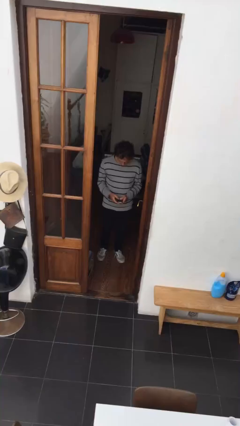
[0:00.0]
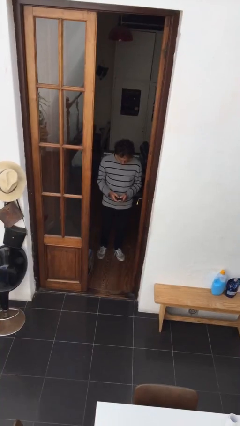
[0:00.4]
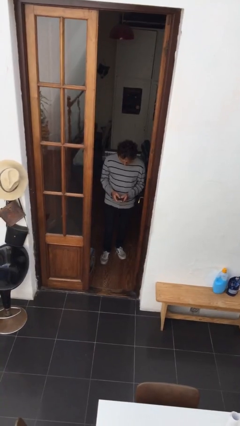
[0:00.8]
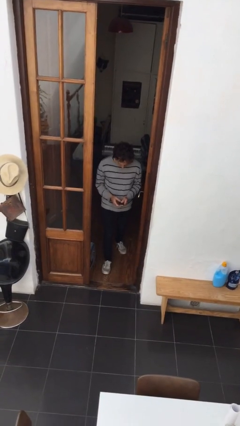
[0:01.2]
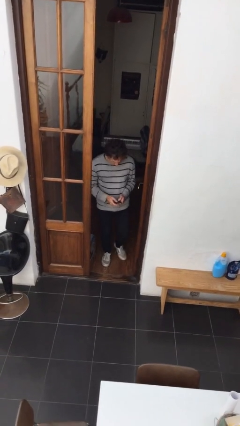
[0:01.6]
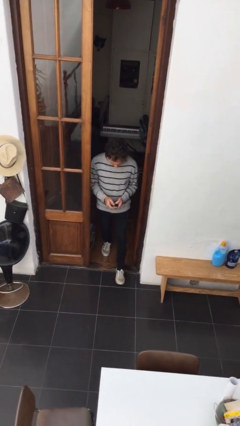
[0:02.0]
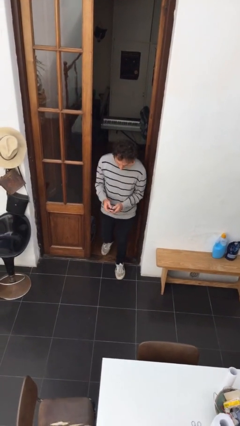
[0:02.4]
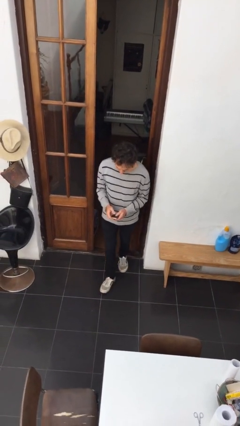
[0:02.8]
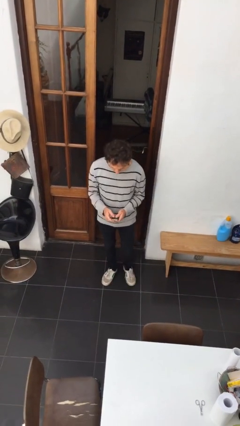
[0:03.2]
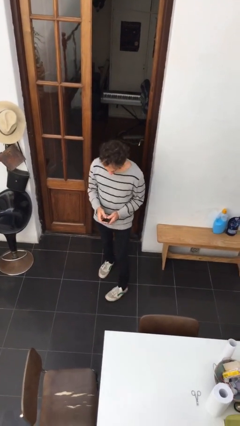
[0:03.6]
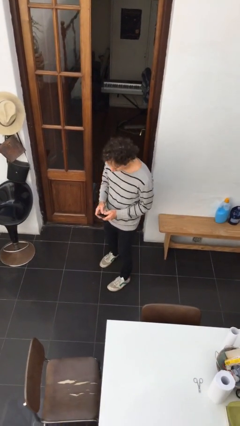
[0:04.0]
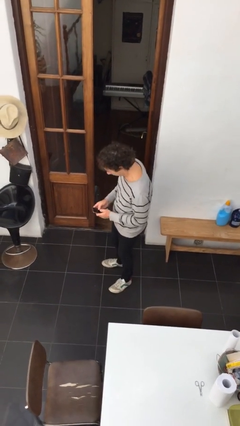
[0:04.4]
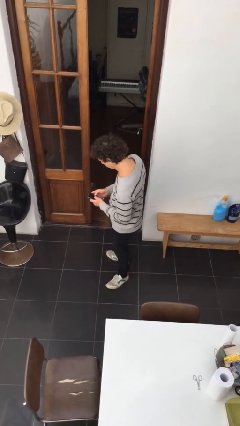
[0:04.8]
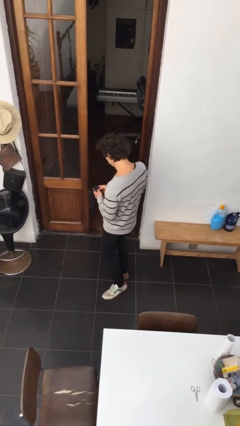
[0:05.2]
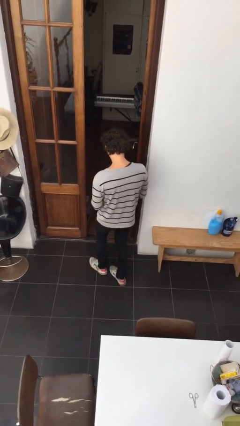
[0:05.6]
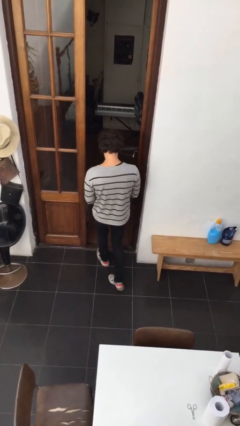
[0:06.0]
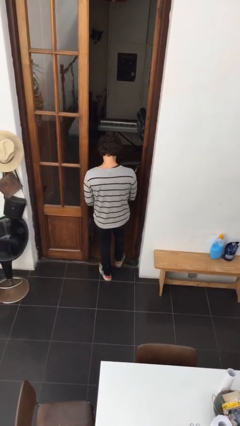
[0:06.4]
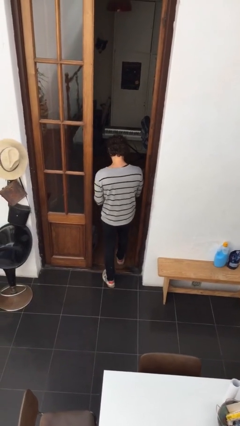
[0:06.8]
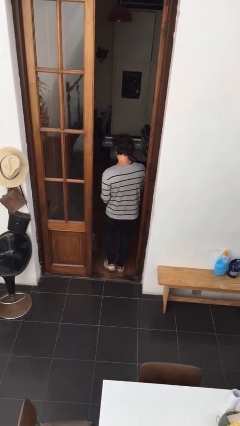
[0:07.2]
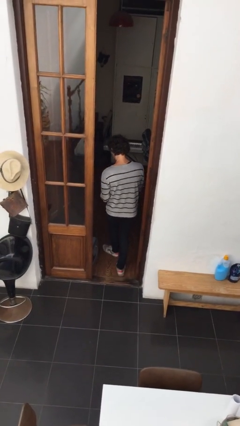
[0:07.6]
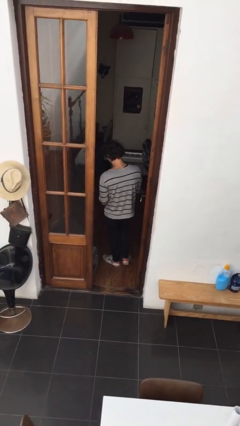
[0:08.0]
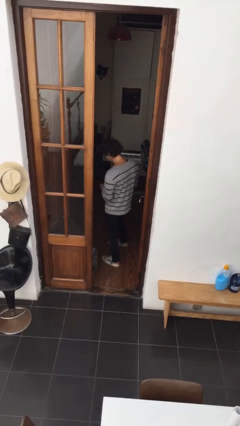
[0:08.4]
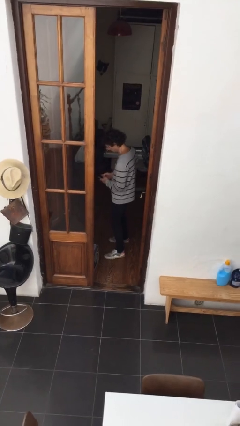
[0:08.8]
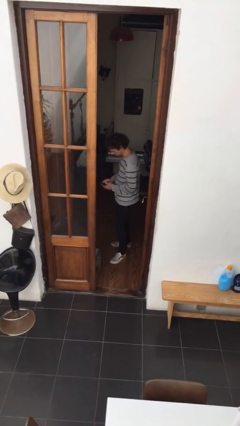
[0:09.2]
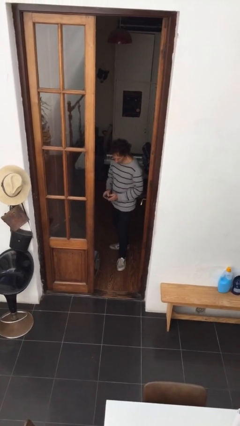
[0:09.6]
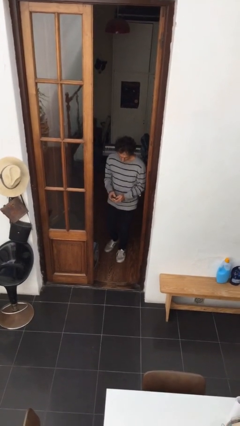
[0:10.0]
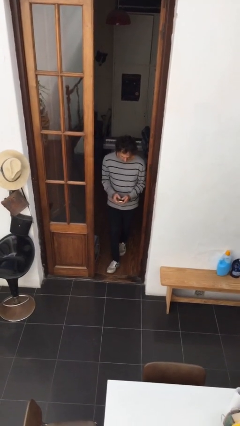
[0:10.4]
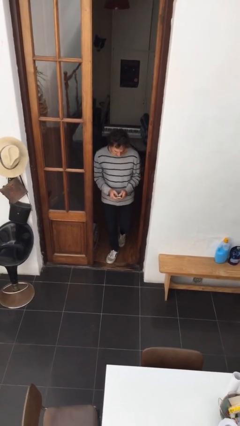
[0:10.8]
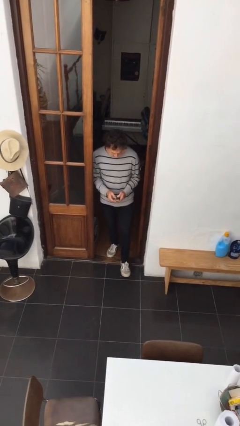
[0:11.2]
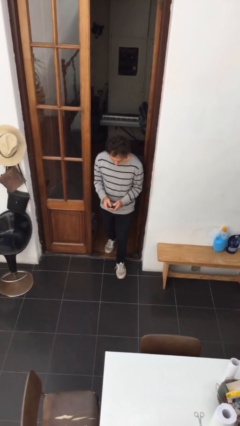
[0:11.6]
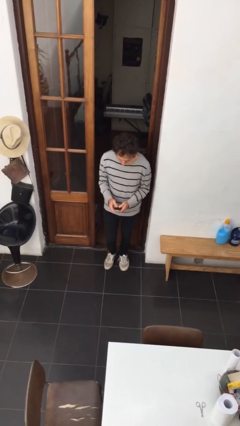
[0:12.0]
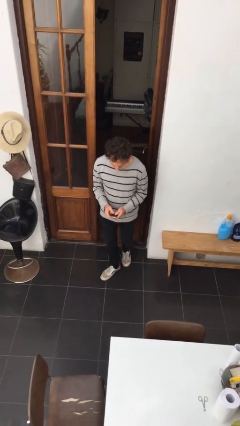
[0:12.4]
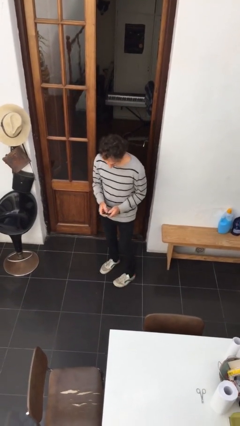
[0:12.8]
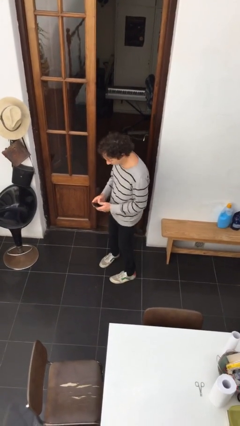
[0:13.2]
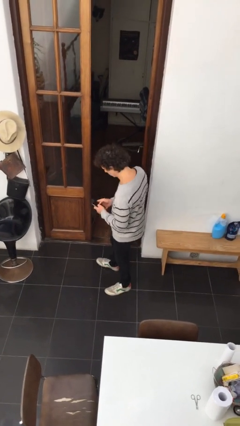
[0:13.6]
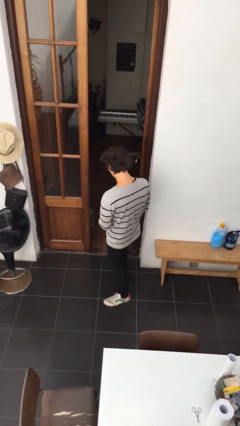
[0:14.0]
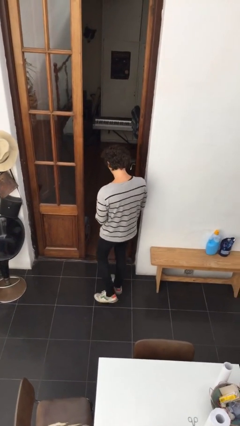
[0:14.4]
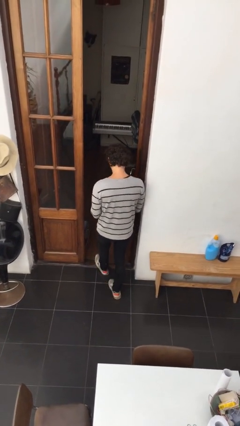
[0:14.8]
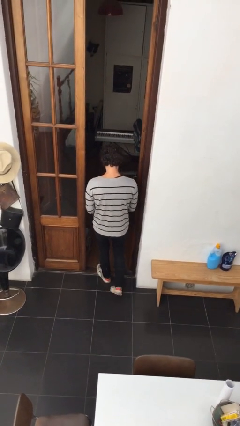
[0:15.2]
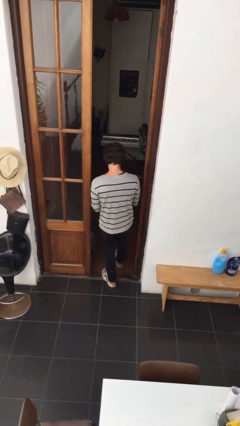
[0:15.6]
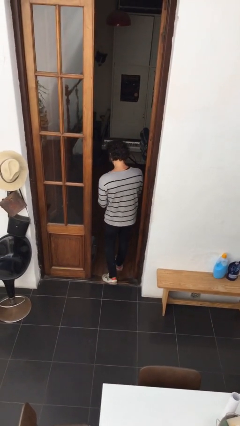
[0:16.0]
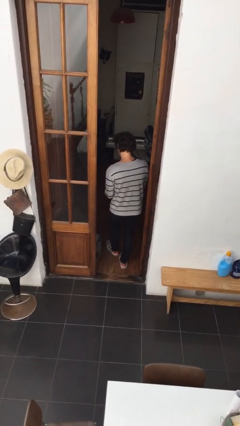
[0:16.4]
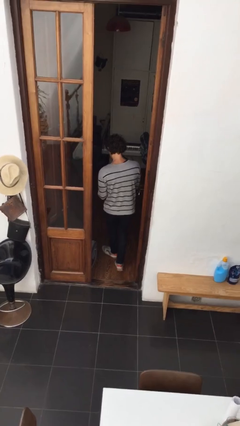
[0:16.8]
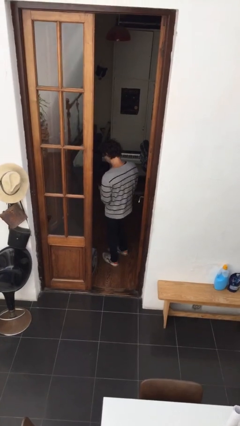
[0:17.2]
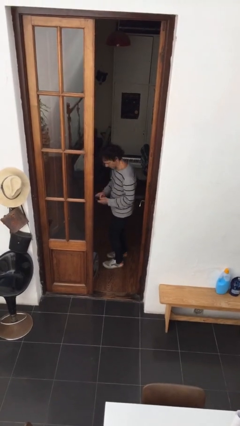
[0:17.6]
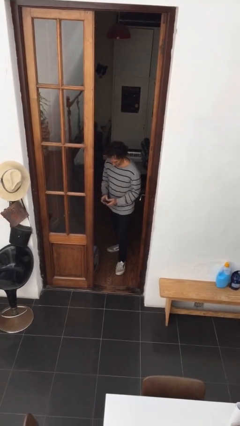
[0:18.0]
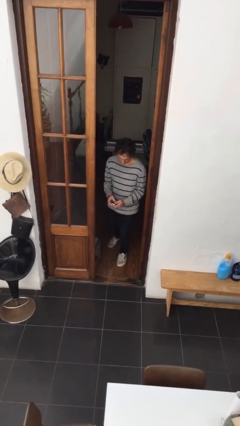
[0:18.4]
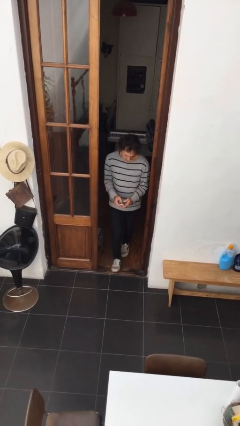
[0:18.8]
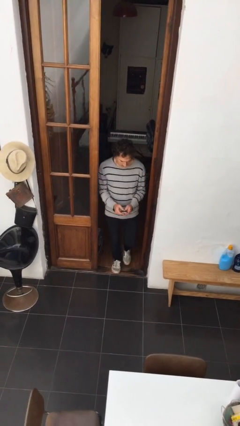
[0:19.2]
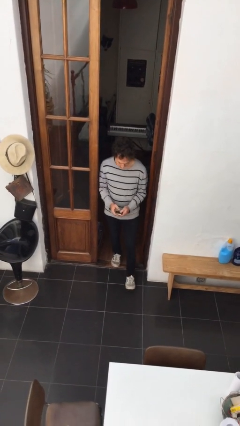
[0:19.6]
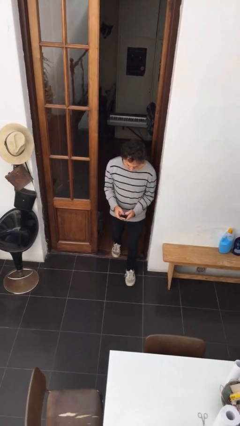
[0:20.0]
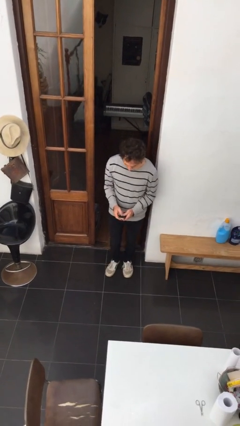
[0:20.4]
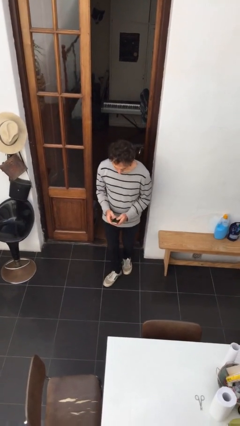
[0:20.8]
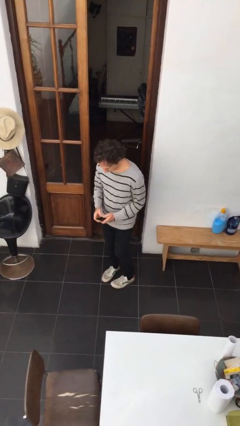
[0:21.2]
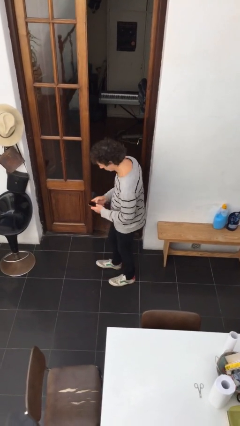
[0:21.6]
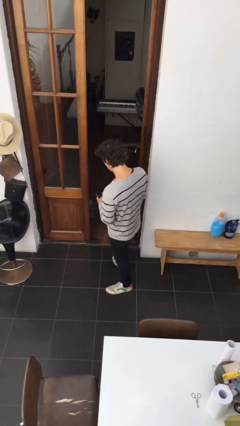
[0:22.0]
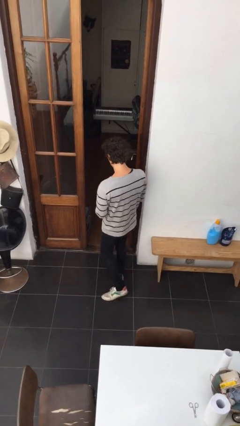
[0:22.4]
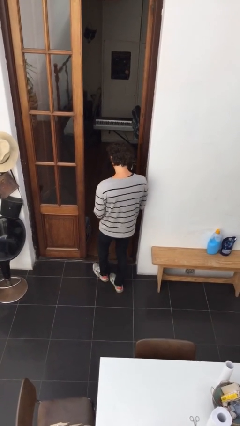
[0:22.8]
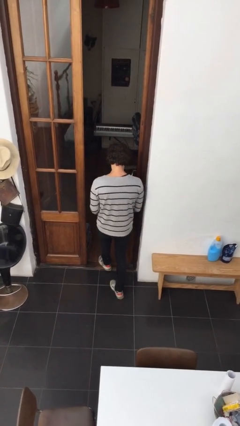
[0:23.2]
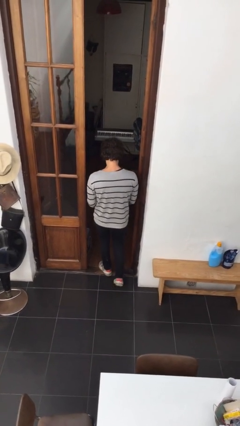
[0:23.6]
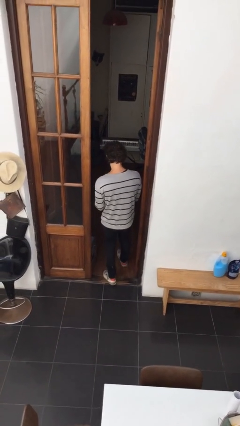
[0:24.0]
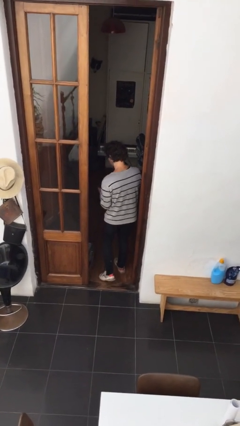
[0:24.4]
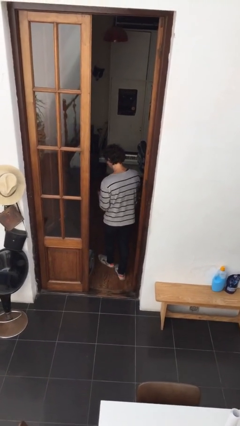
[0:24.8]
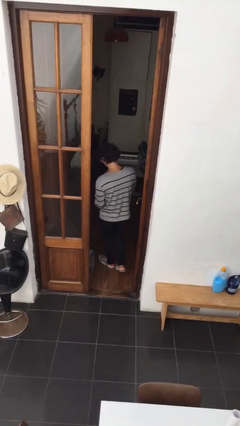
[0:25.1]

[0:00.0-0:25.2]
person texts on phone

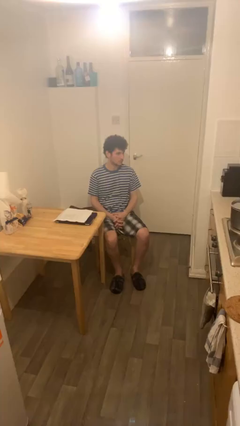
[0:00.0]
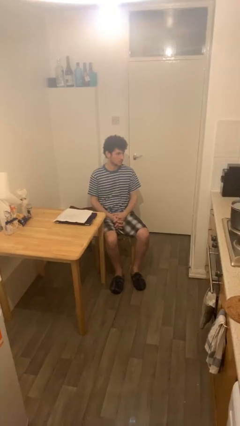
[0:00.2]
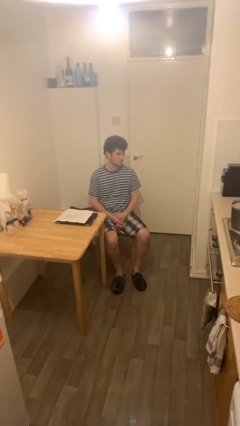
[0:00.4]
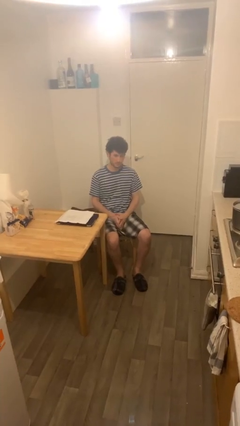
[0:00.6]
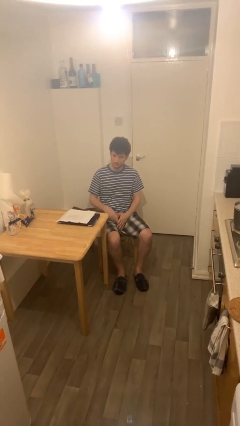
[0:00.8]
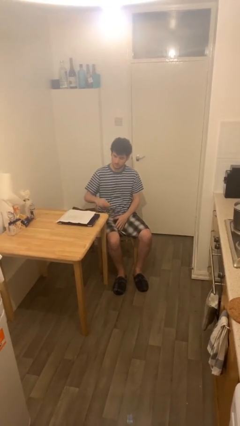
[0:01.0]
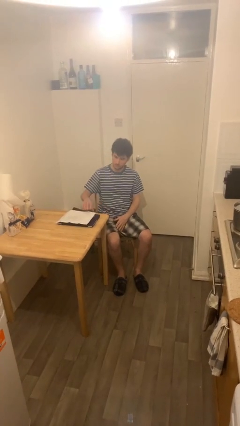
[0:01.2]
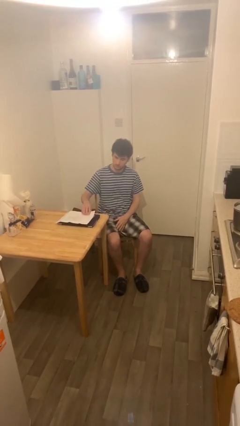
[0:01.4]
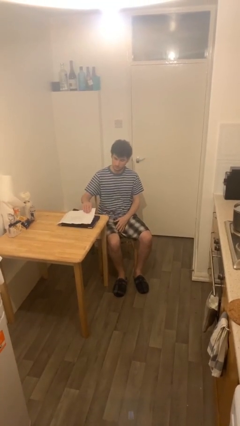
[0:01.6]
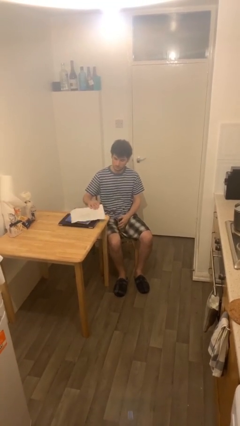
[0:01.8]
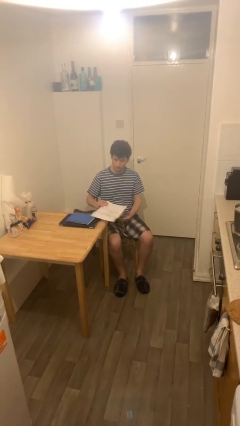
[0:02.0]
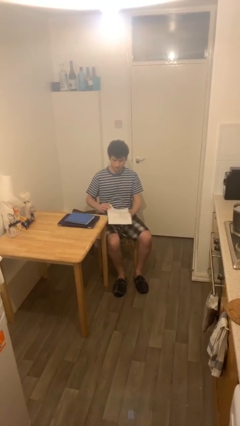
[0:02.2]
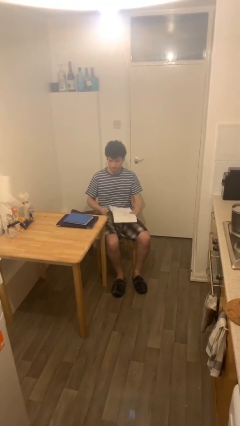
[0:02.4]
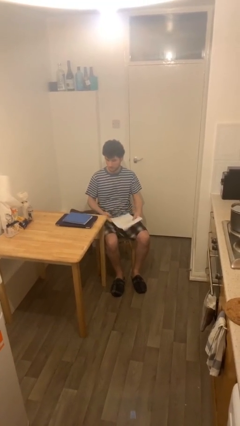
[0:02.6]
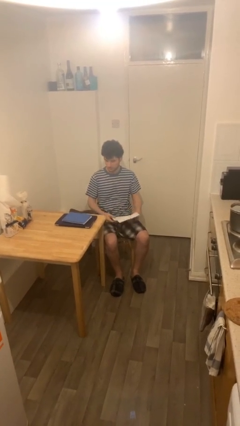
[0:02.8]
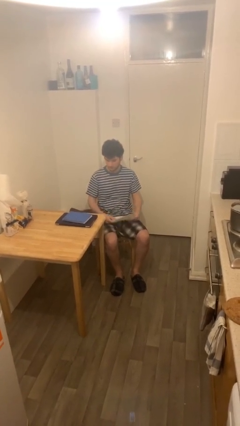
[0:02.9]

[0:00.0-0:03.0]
person picks up object from table

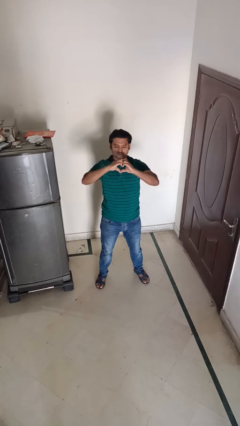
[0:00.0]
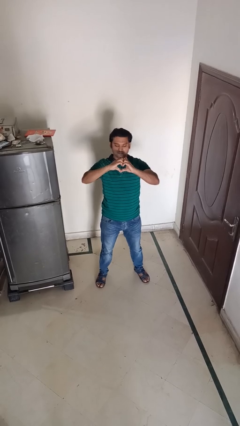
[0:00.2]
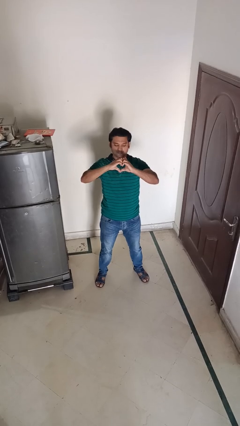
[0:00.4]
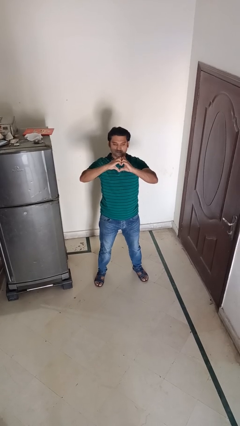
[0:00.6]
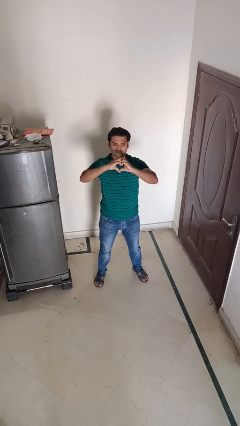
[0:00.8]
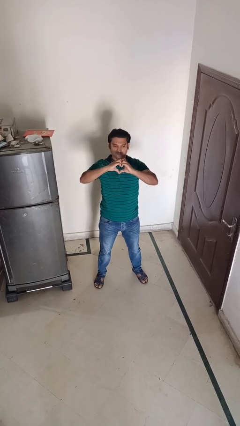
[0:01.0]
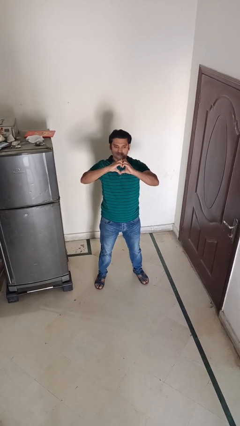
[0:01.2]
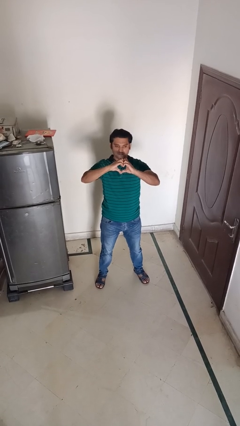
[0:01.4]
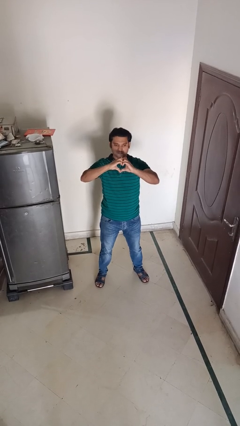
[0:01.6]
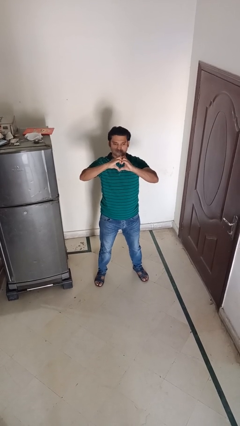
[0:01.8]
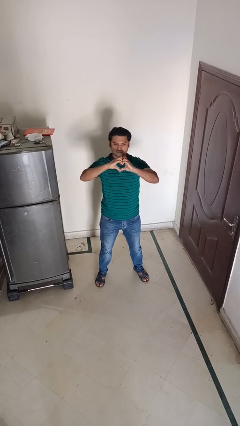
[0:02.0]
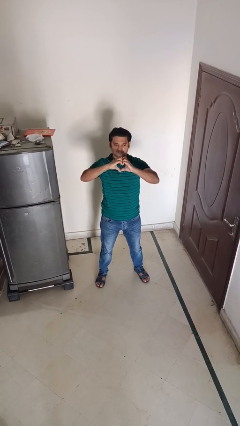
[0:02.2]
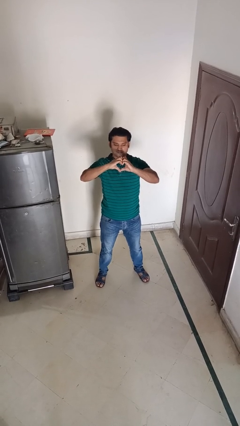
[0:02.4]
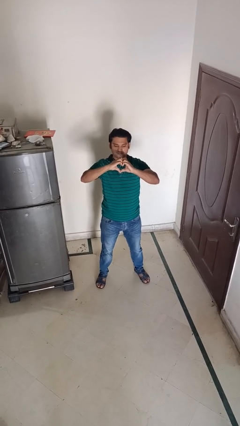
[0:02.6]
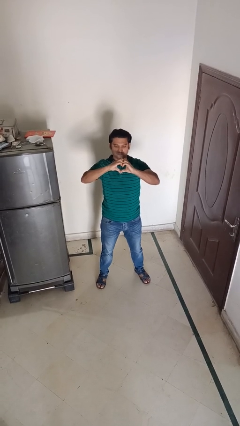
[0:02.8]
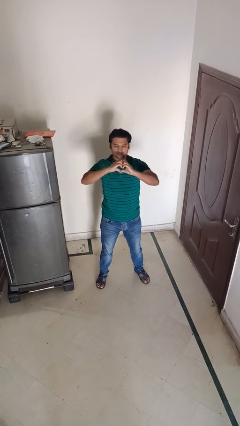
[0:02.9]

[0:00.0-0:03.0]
person gestures heart
